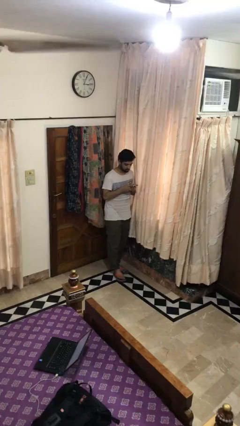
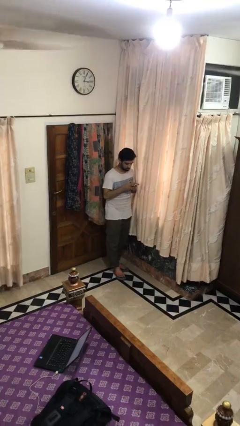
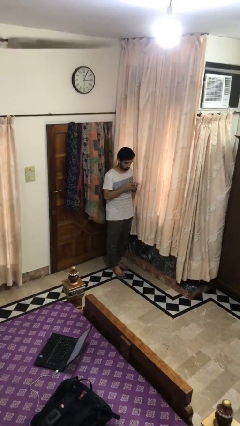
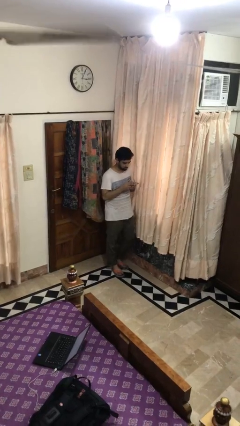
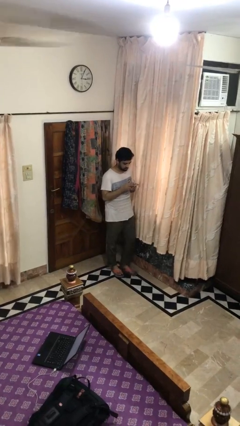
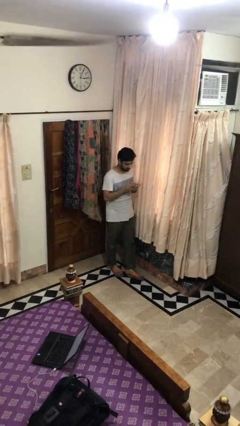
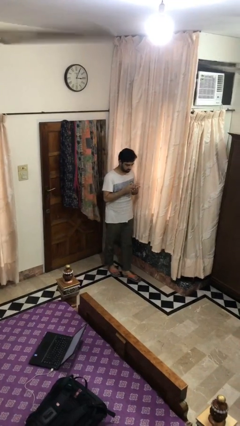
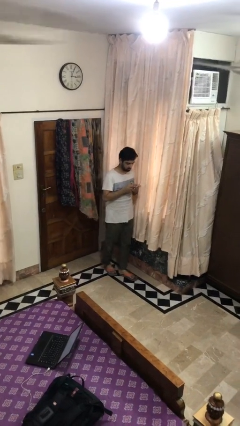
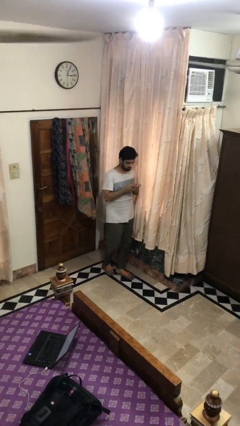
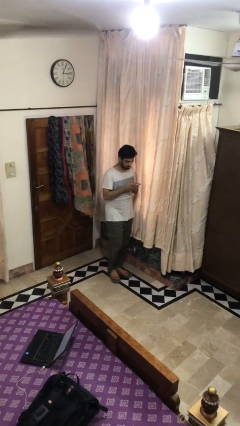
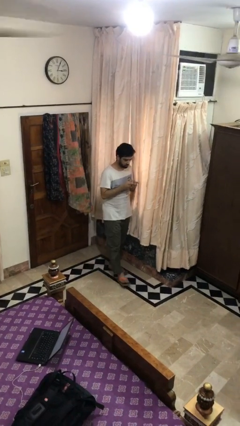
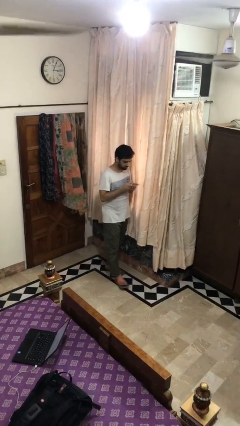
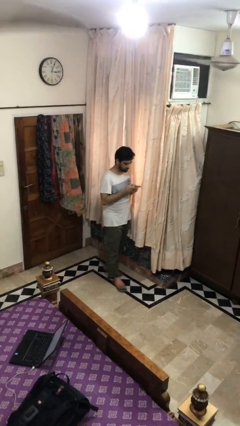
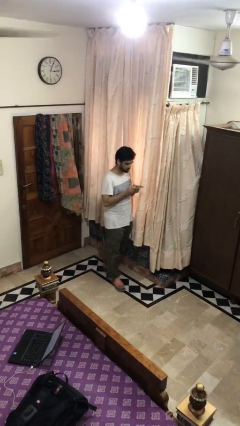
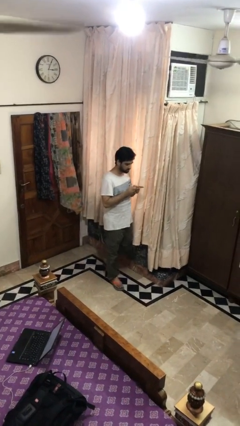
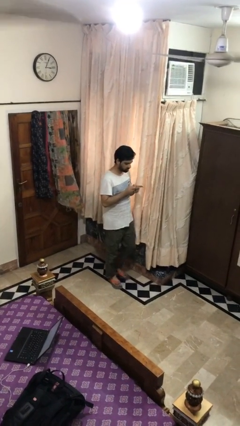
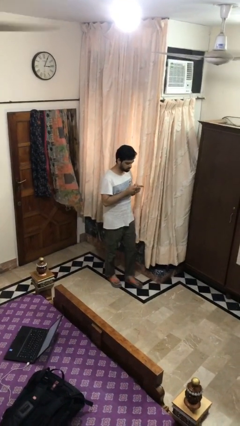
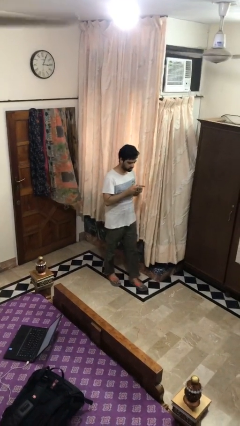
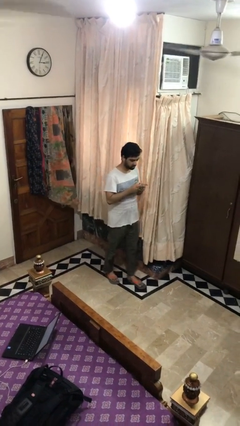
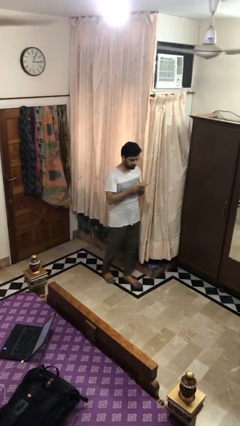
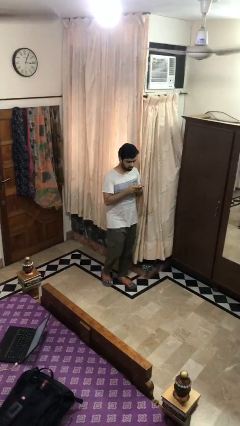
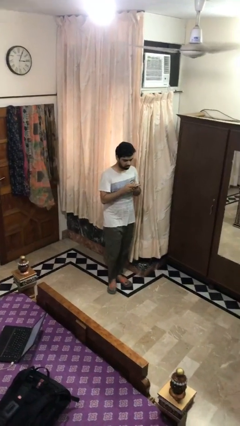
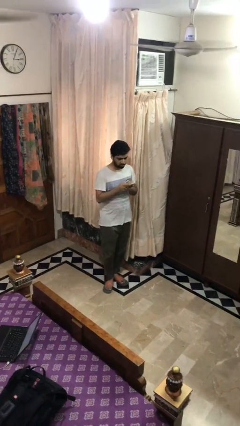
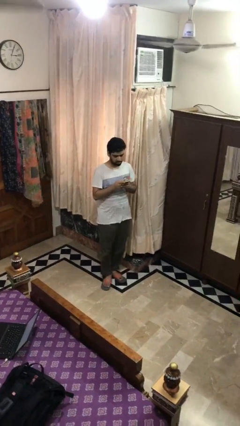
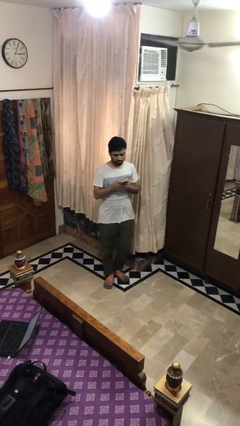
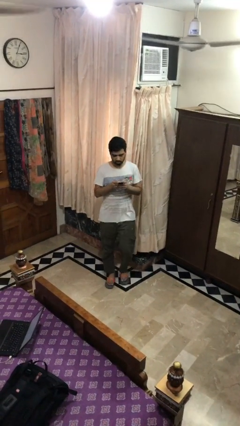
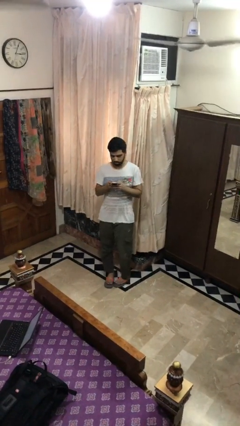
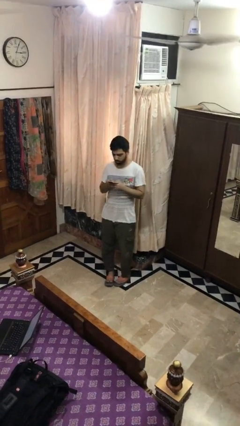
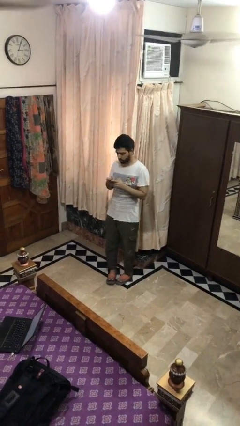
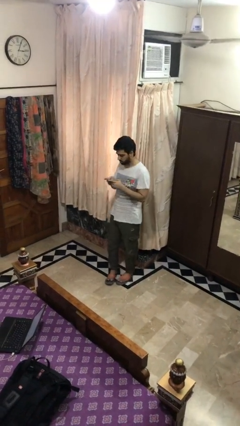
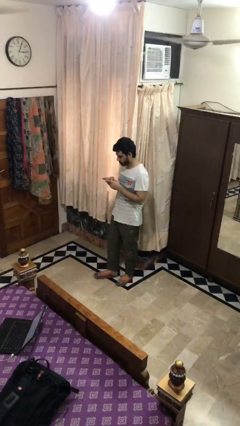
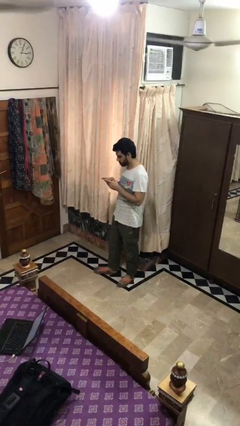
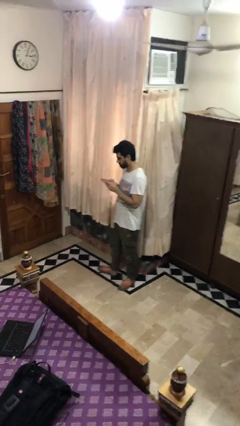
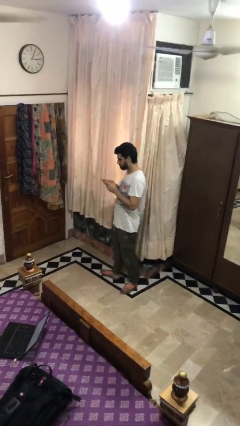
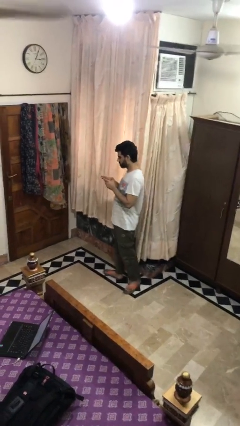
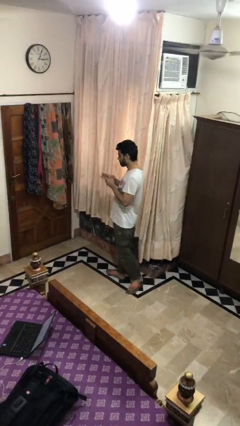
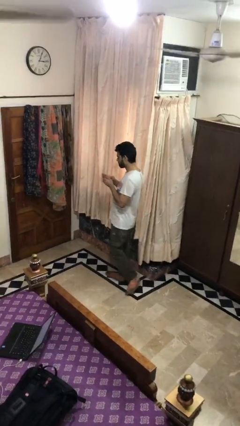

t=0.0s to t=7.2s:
person texts on phone

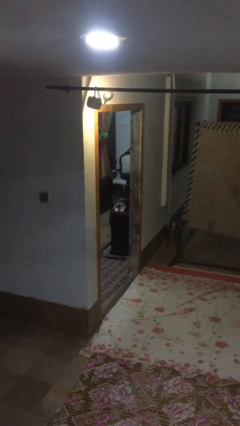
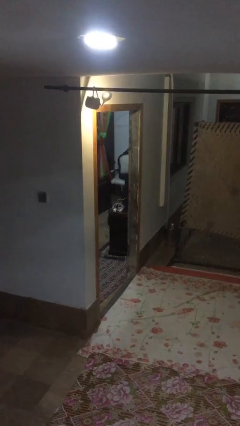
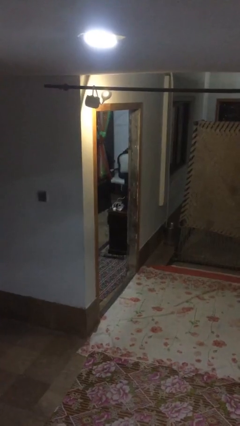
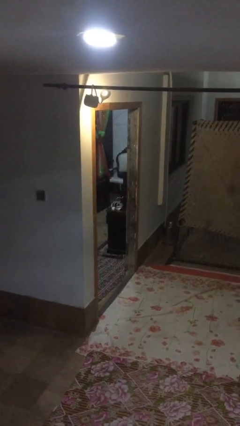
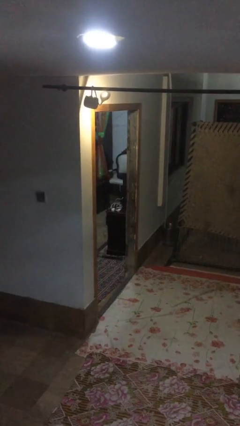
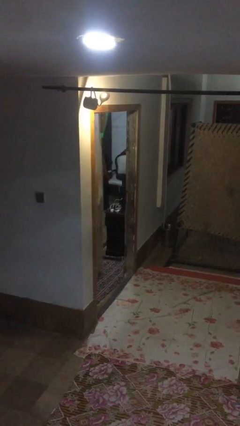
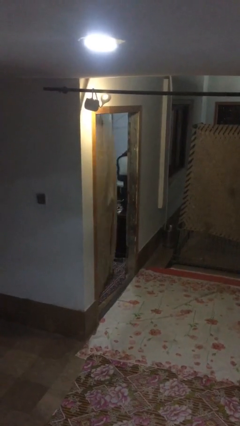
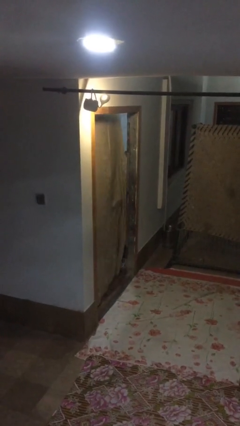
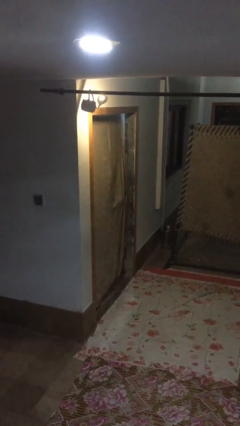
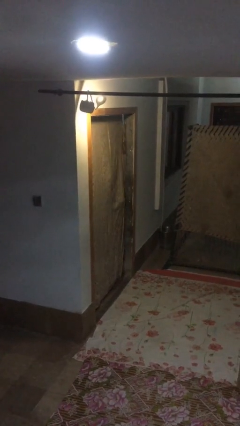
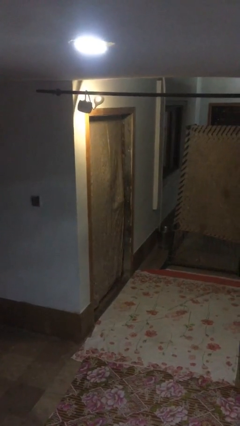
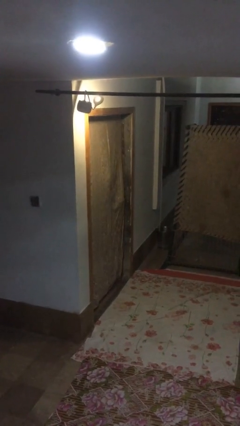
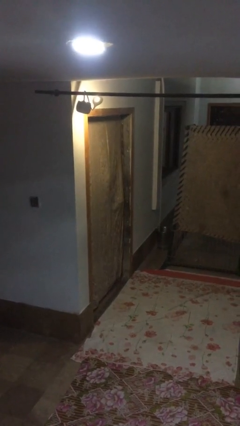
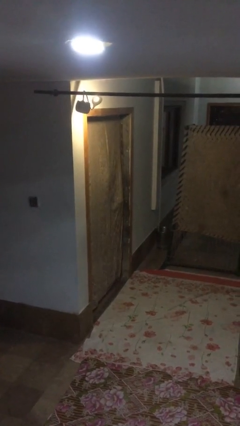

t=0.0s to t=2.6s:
person closes facility door

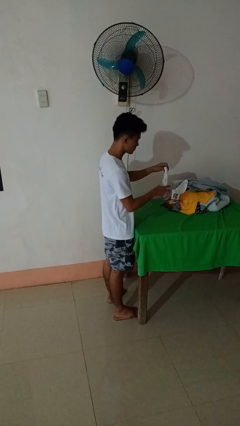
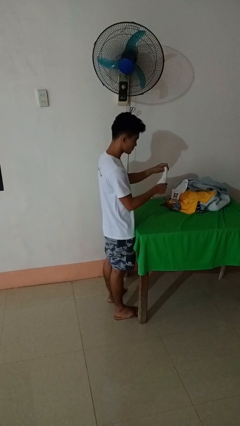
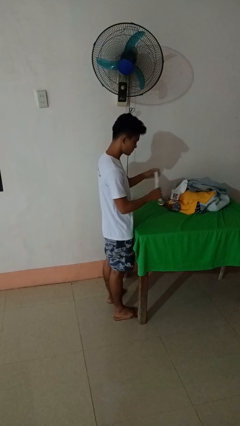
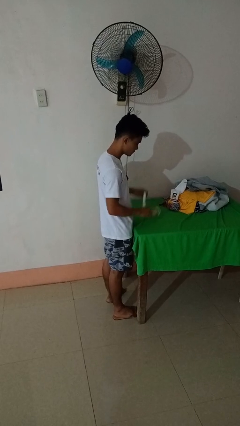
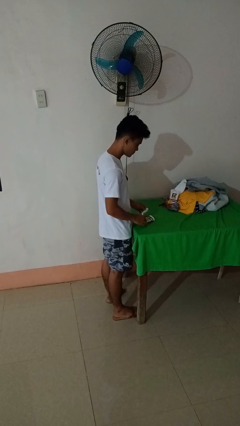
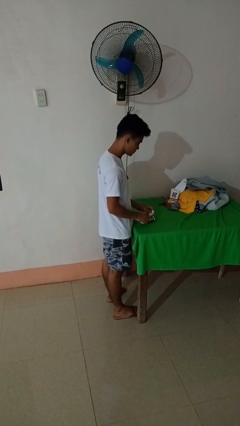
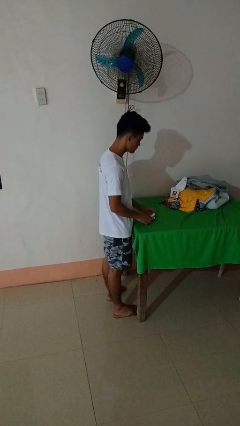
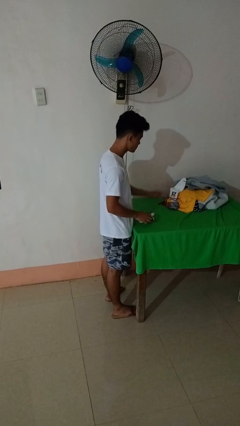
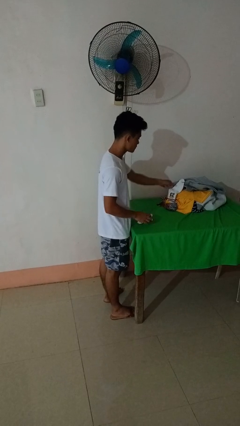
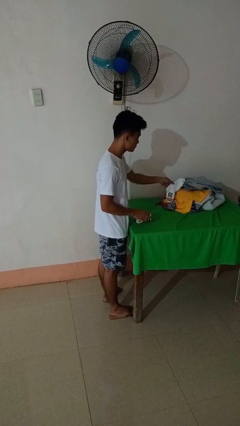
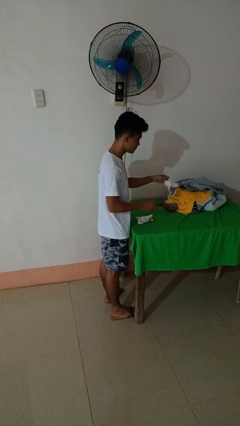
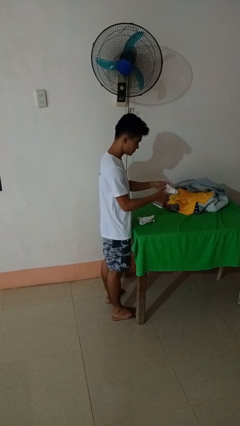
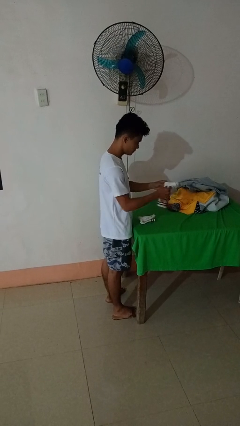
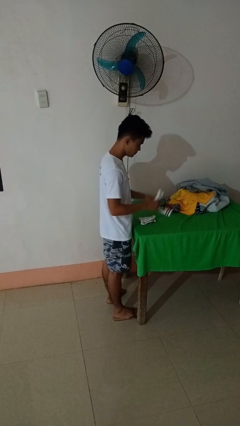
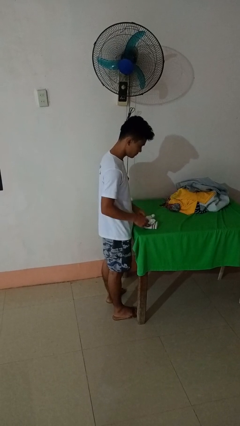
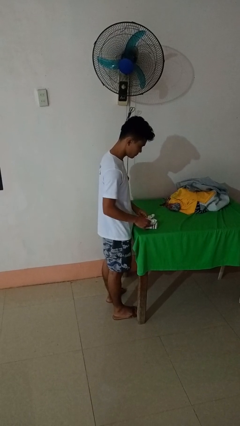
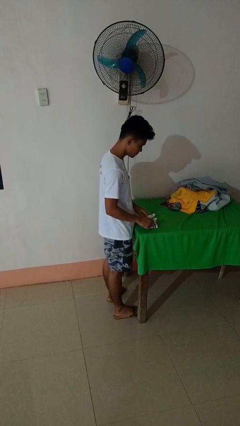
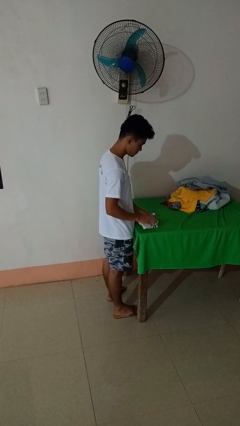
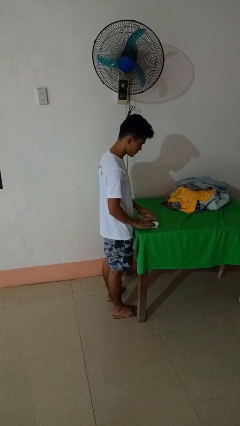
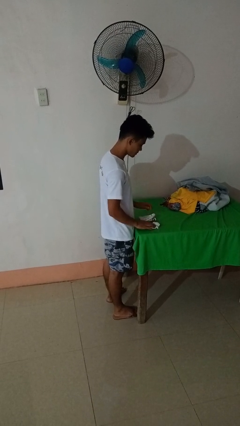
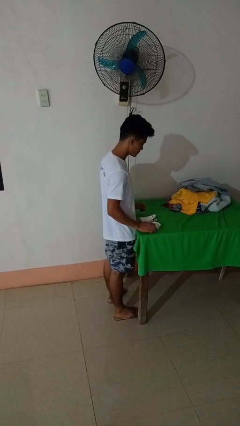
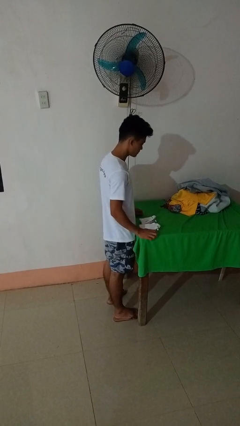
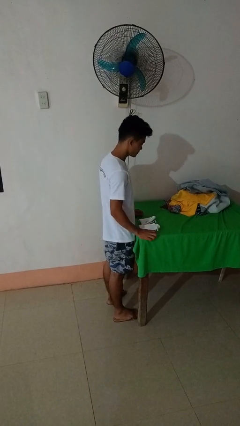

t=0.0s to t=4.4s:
person folds socks

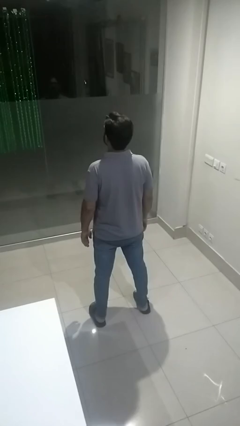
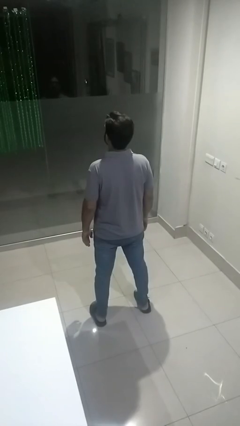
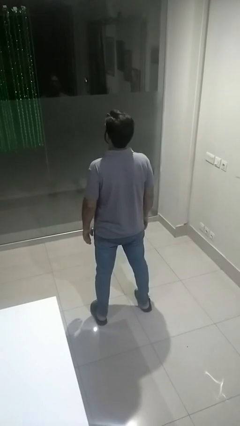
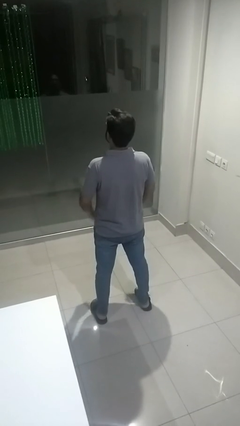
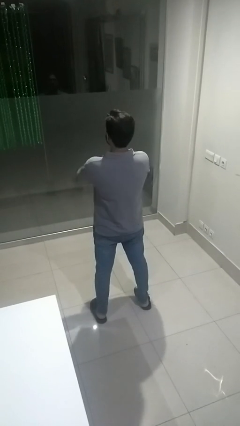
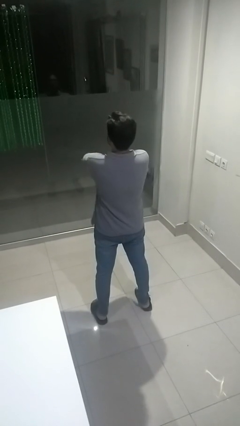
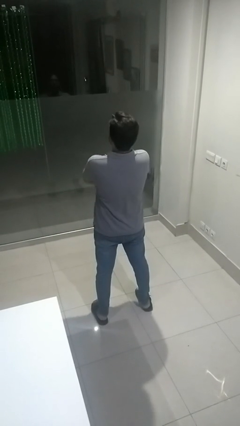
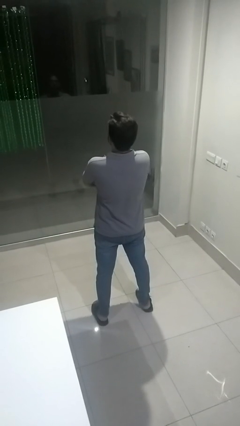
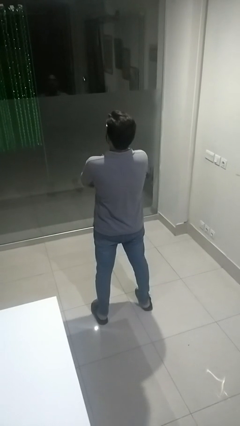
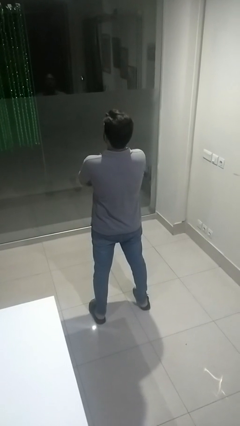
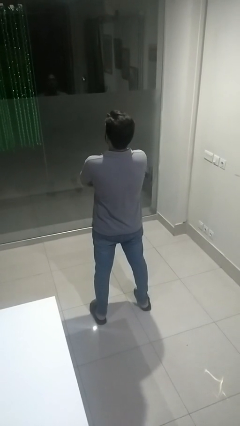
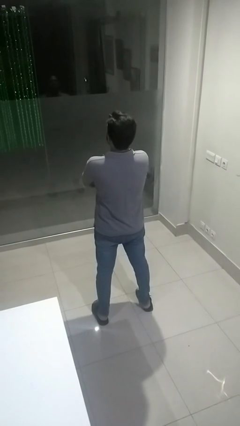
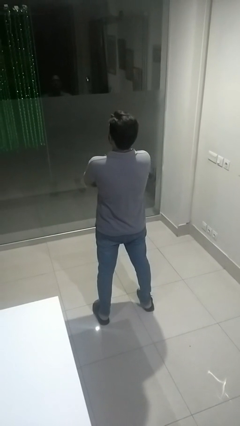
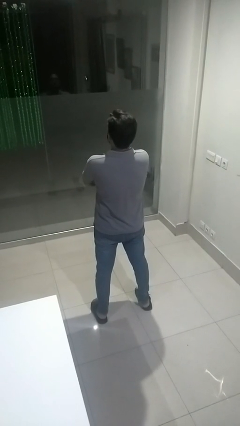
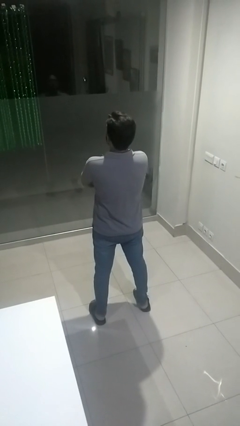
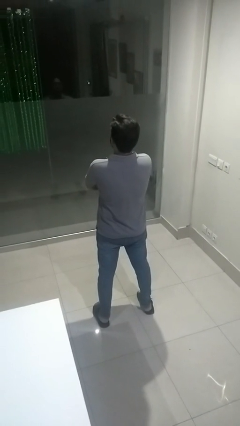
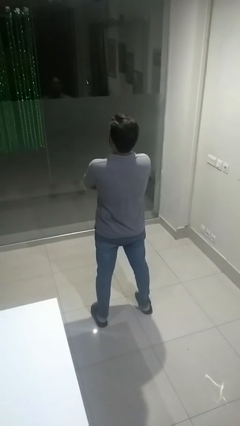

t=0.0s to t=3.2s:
person crosses arms
